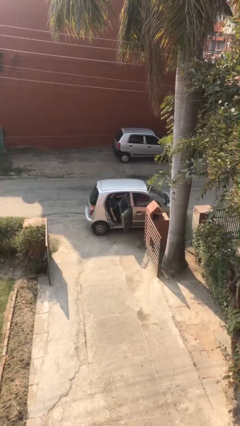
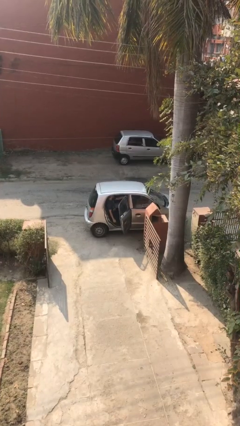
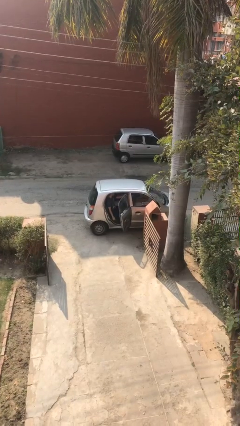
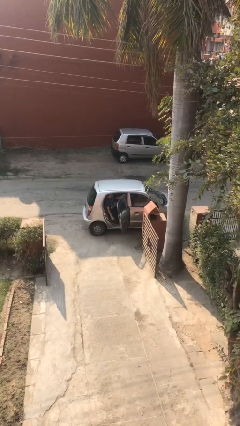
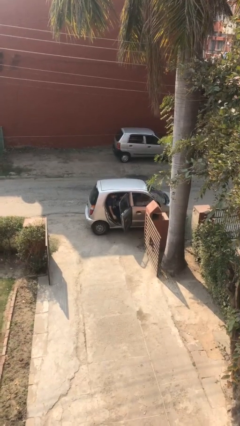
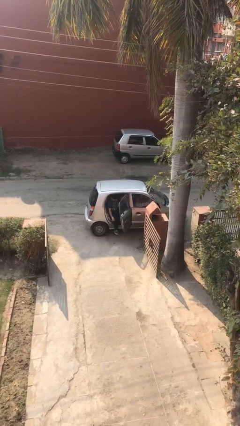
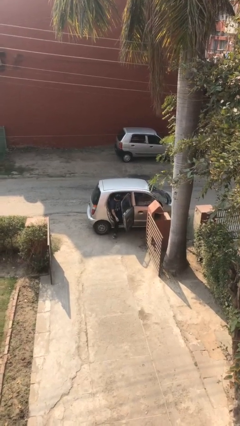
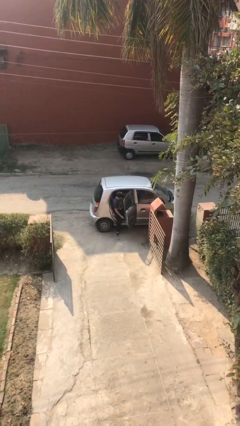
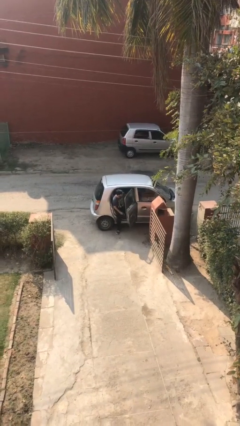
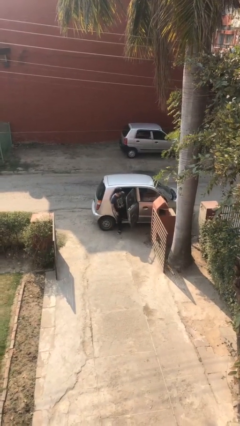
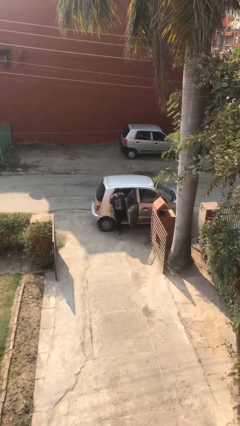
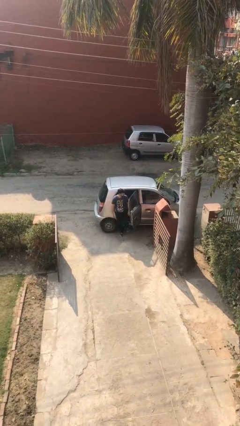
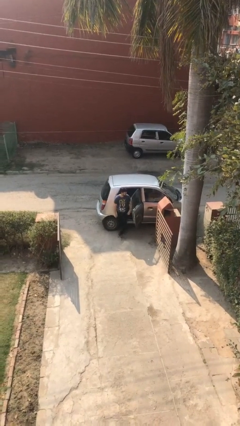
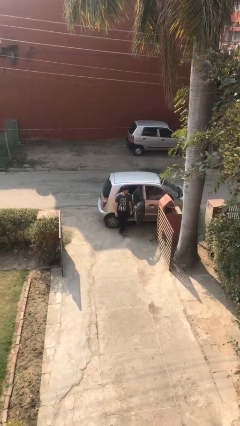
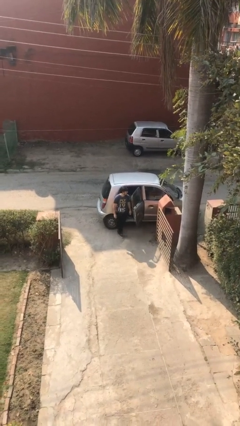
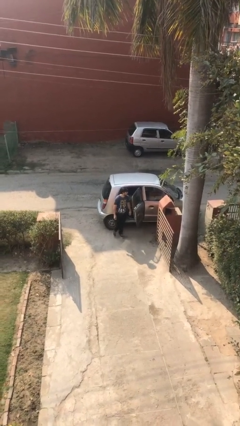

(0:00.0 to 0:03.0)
person exits car

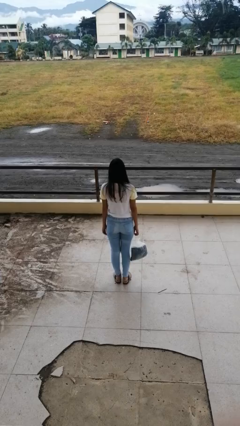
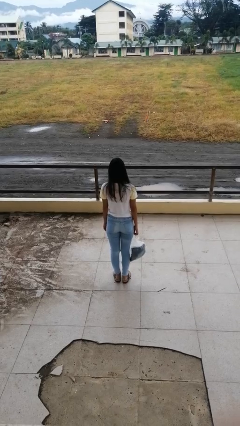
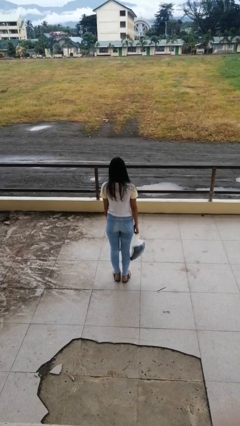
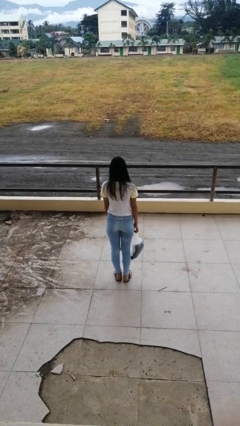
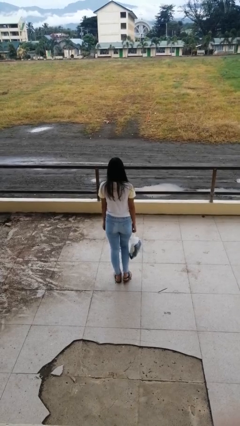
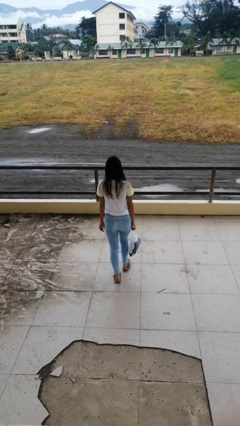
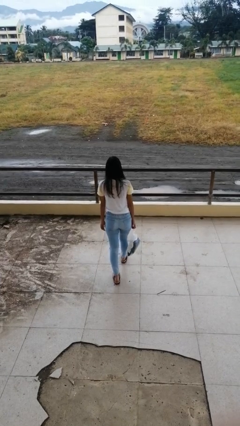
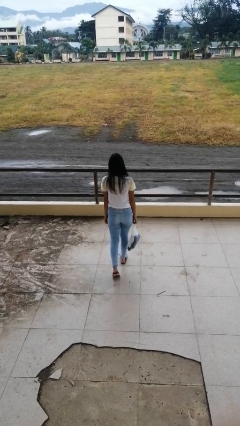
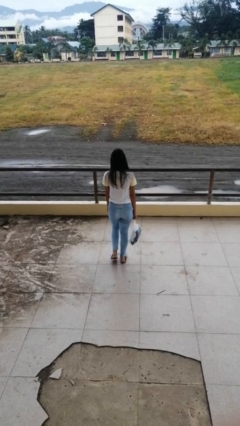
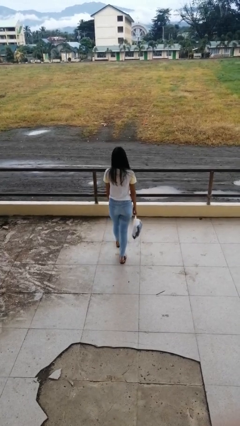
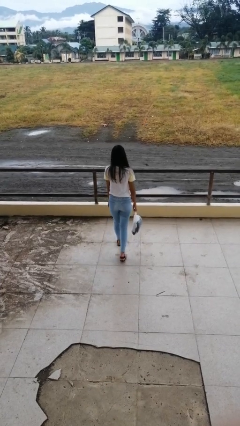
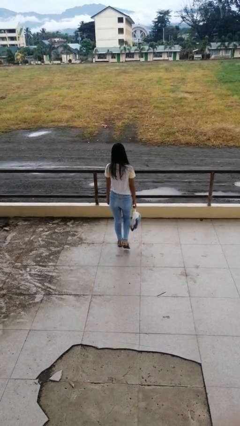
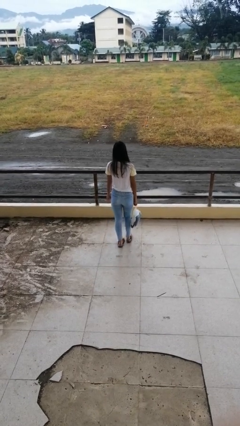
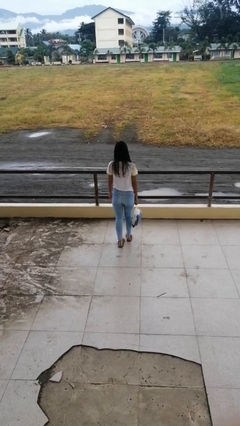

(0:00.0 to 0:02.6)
person carries groceries

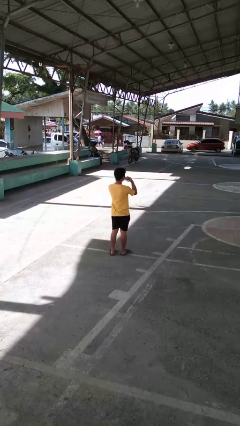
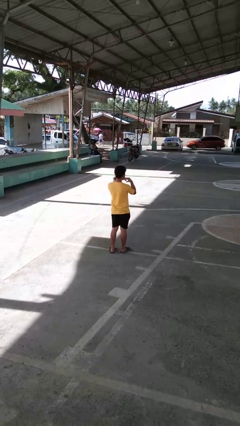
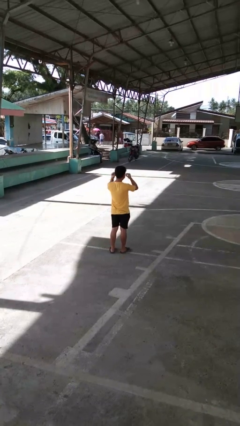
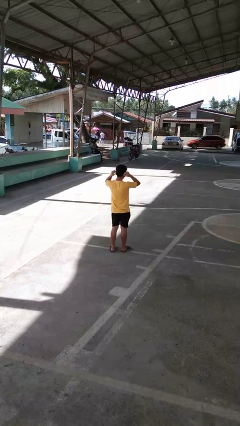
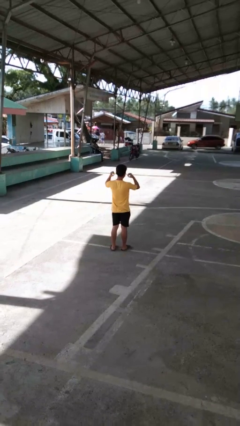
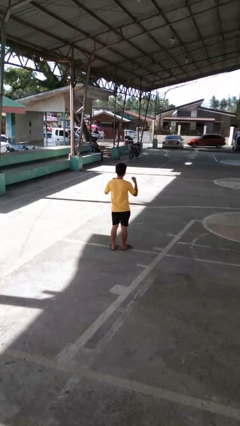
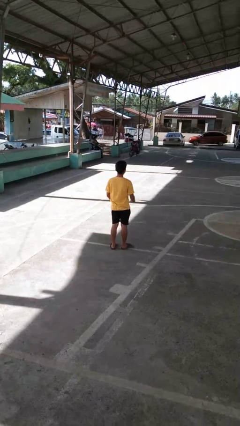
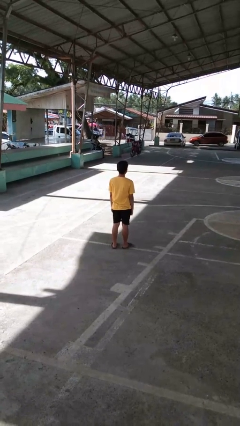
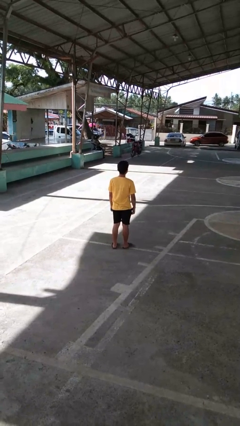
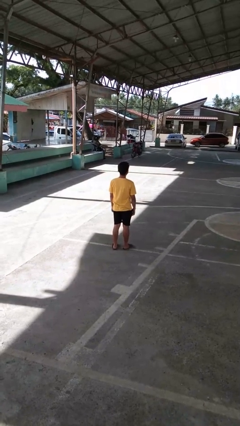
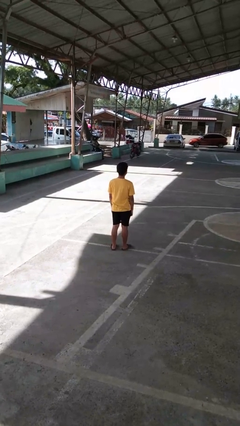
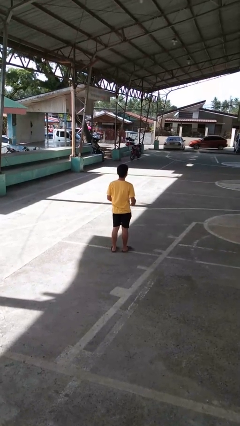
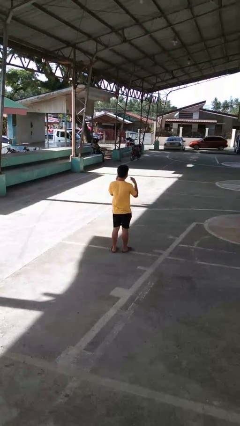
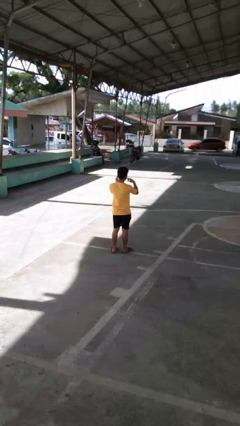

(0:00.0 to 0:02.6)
person puts on facemask

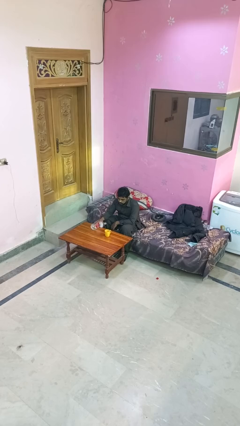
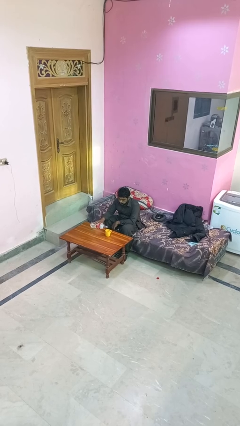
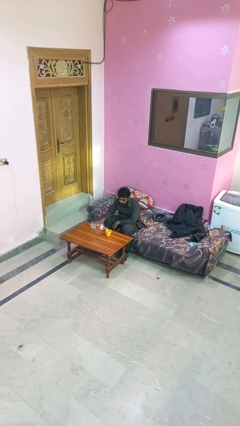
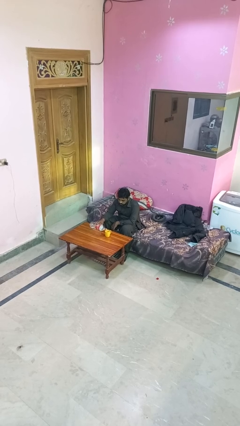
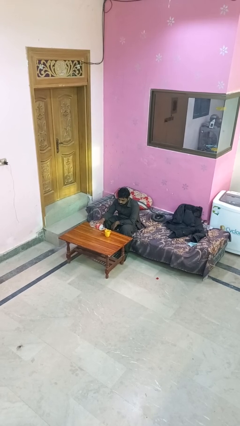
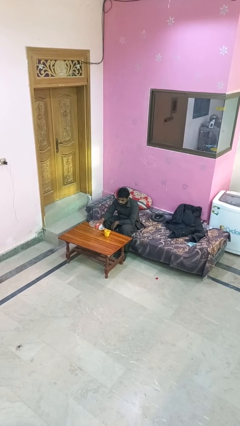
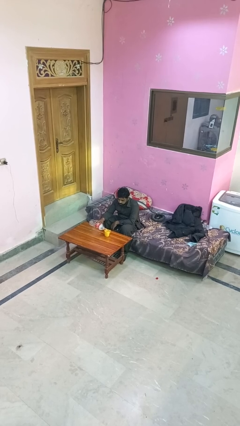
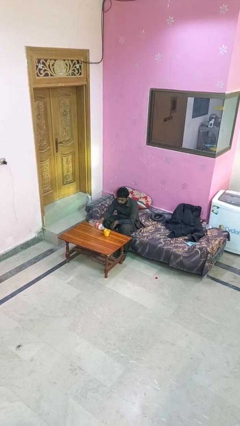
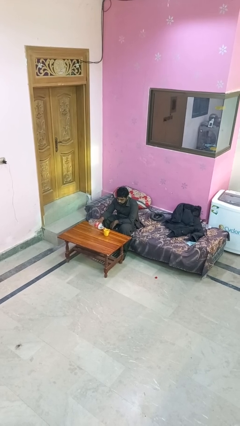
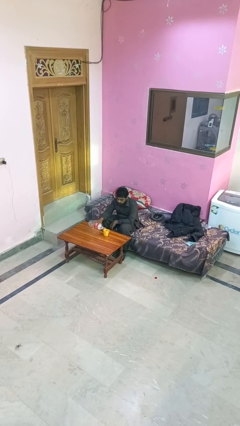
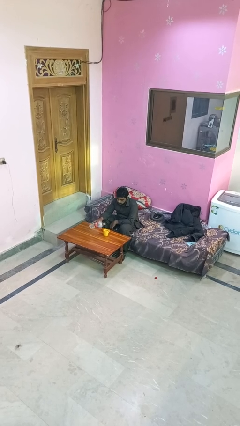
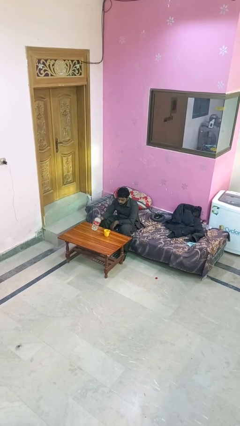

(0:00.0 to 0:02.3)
person pours liquid into cup

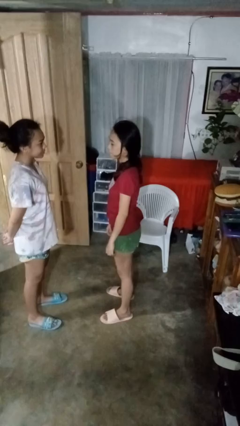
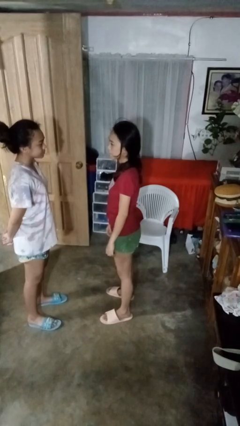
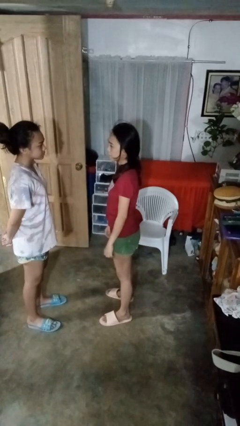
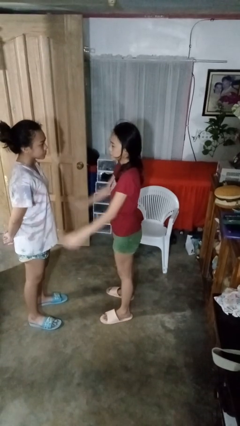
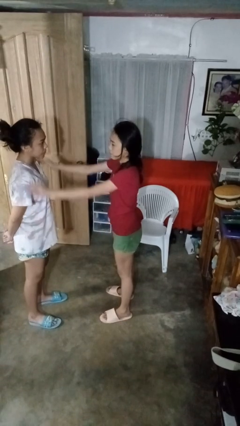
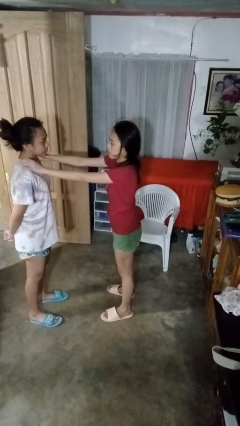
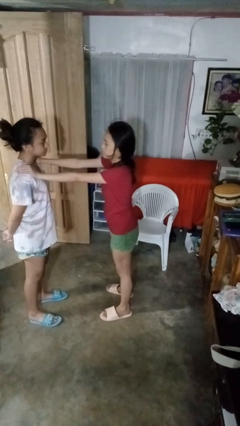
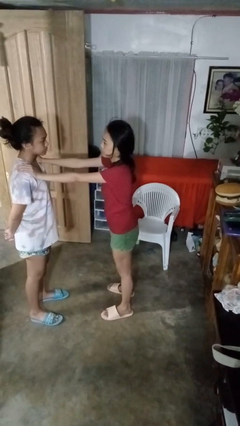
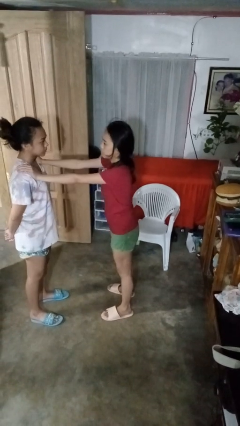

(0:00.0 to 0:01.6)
person pounds shoulders of person

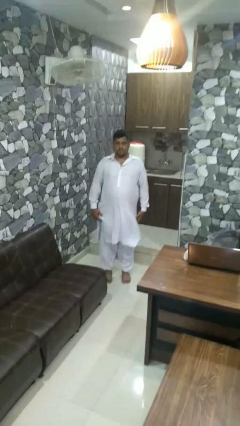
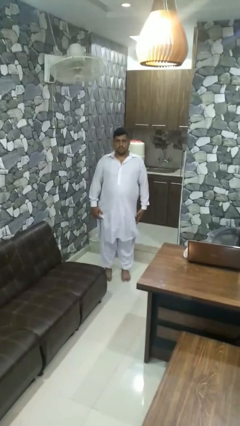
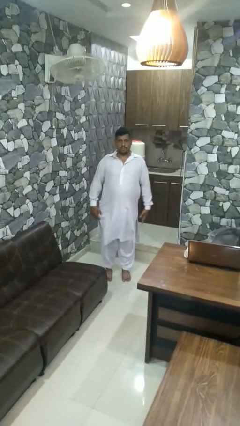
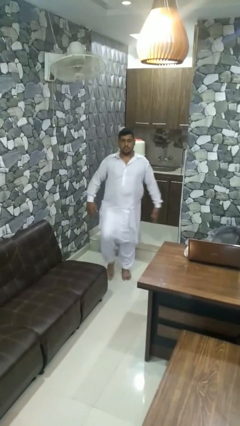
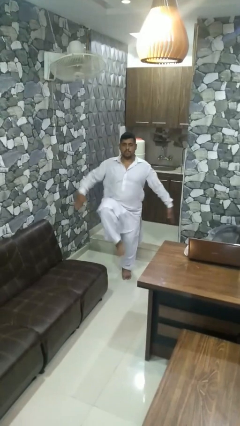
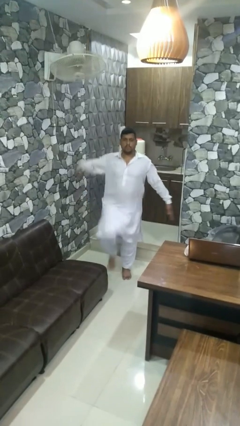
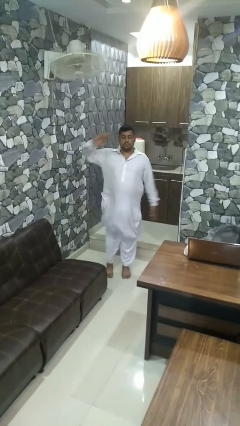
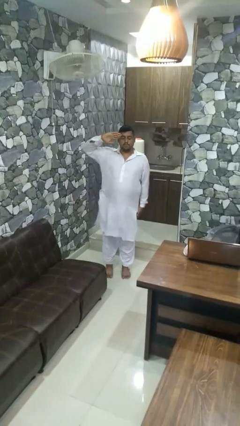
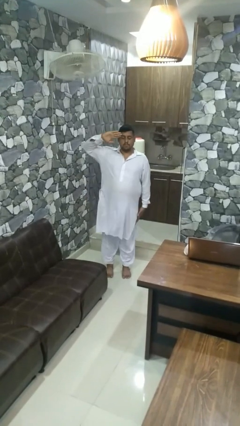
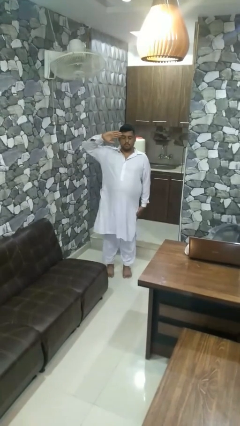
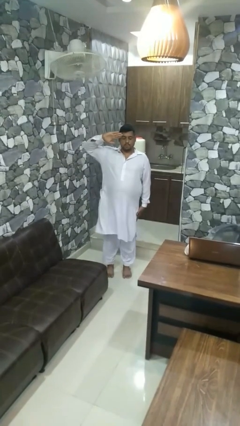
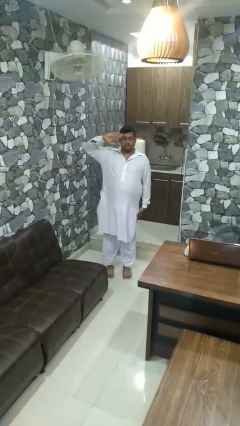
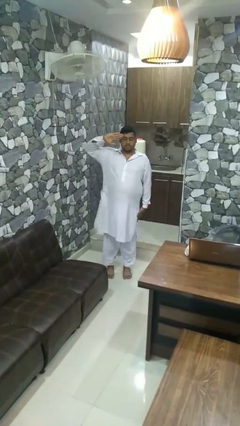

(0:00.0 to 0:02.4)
person salutes

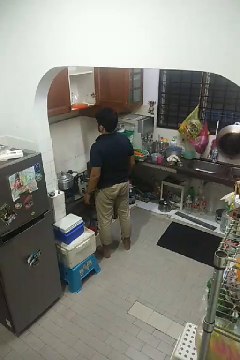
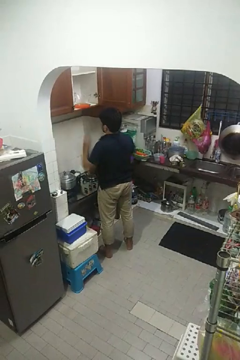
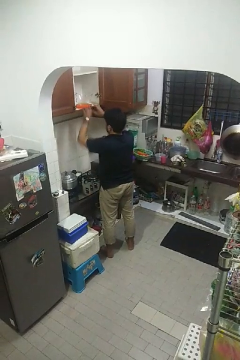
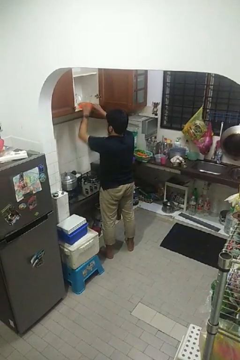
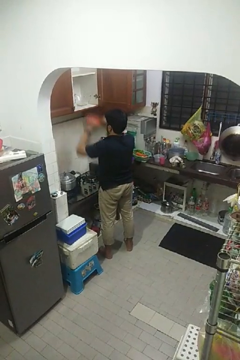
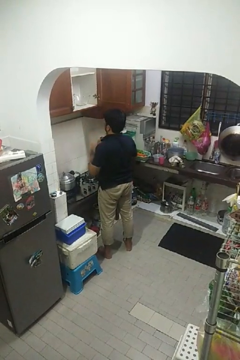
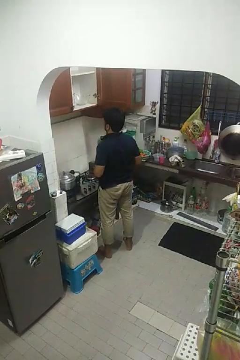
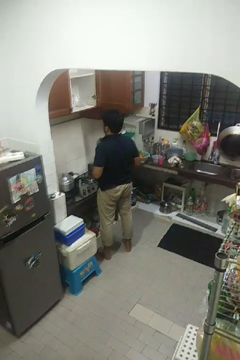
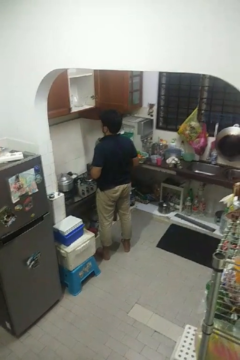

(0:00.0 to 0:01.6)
person takes object from cabinet

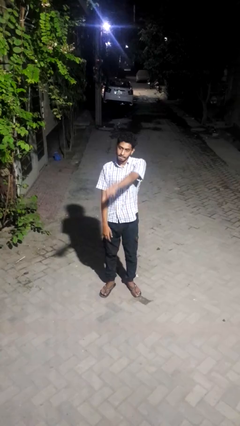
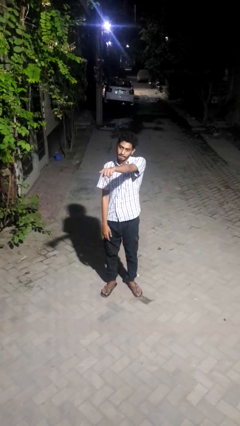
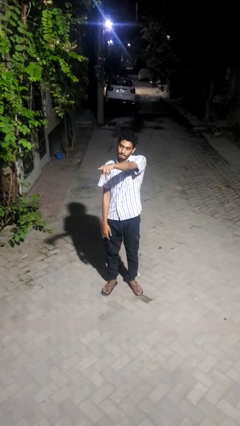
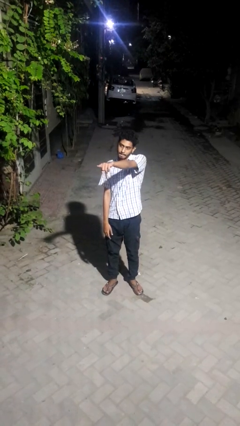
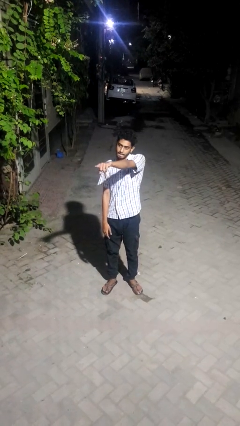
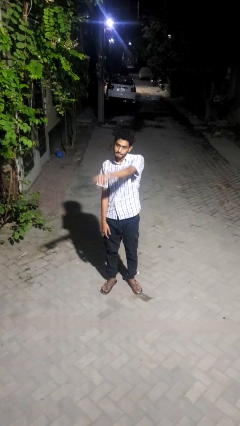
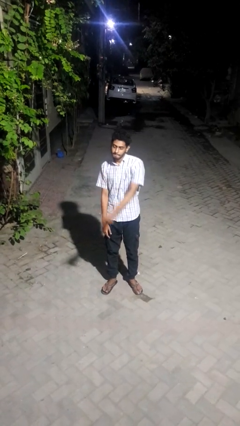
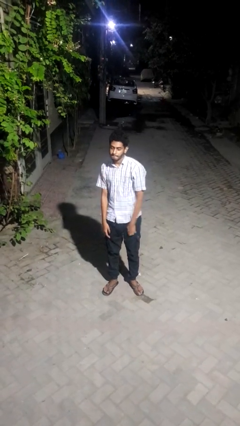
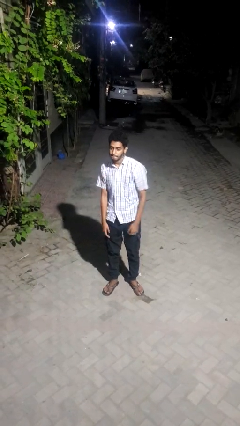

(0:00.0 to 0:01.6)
person points at person
